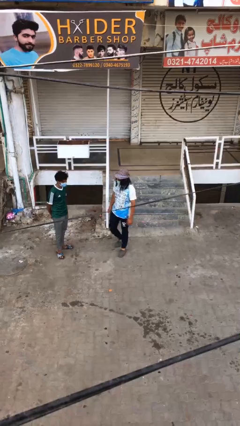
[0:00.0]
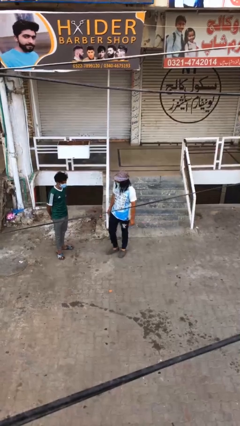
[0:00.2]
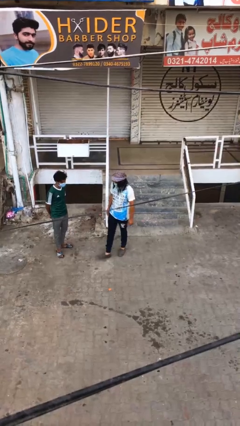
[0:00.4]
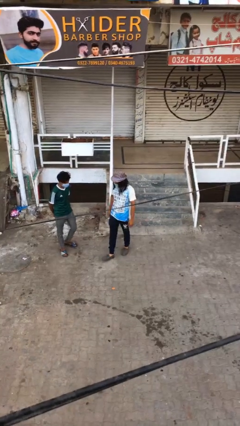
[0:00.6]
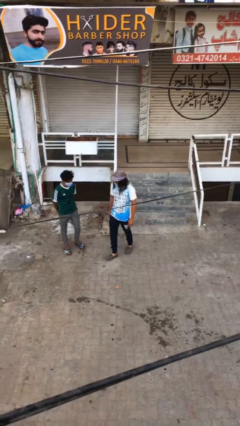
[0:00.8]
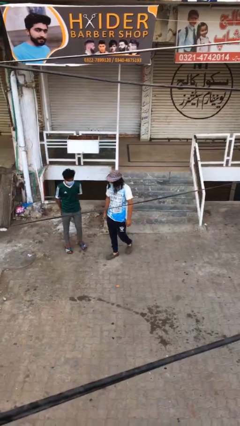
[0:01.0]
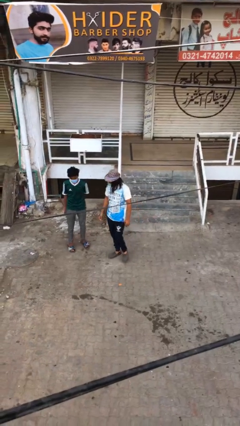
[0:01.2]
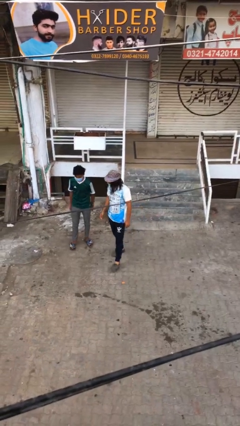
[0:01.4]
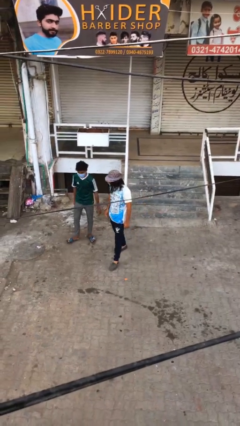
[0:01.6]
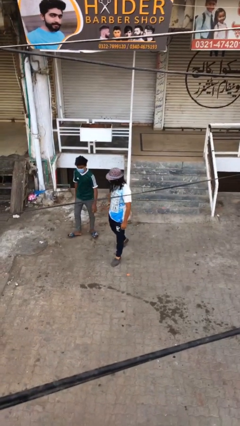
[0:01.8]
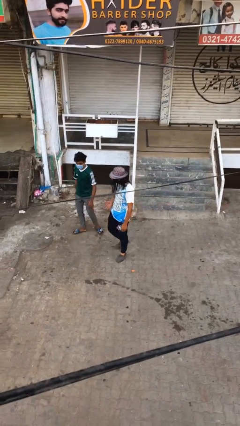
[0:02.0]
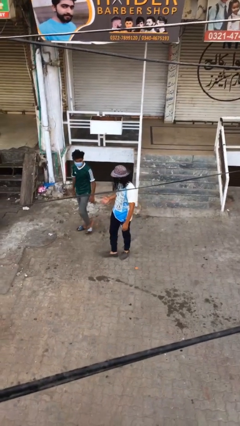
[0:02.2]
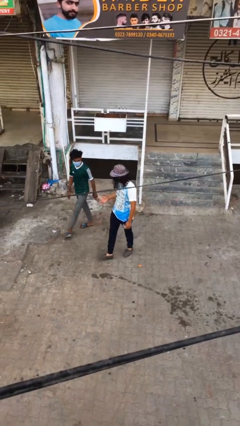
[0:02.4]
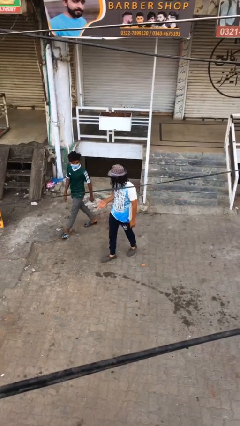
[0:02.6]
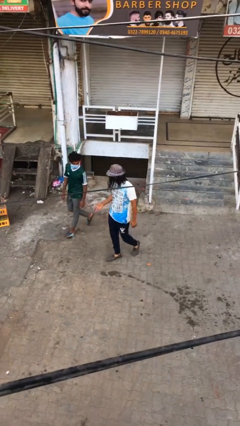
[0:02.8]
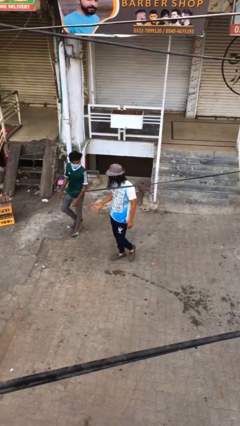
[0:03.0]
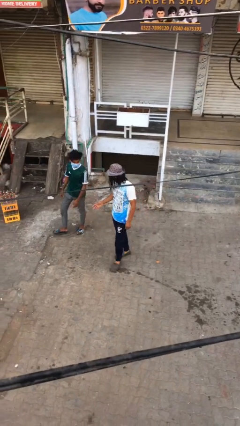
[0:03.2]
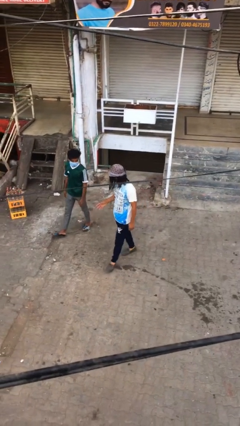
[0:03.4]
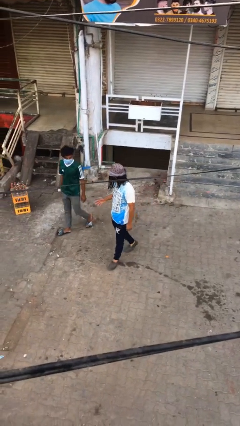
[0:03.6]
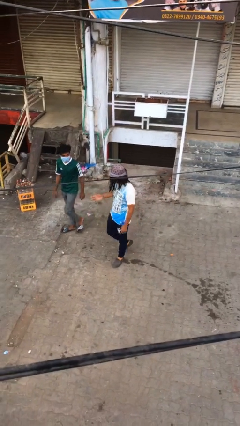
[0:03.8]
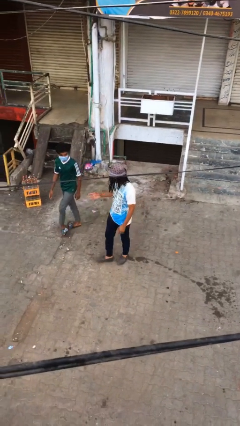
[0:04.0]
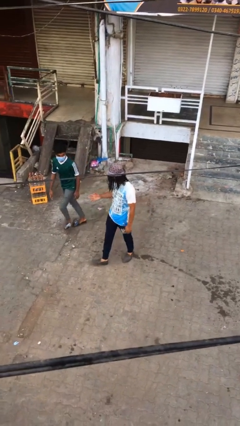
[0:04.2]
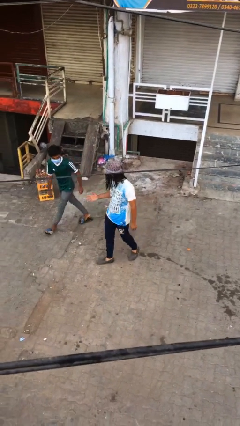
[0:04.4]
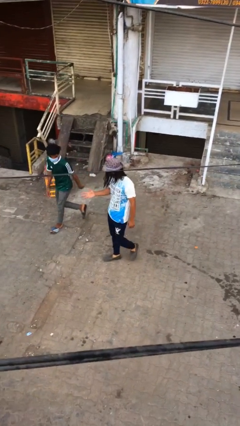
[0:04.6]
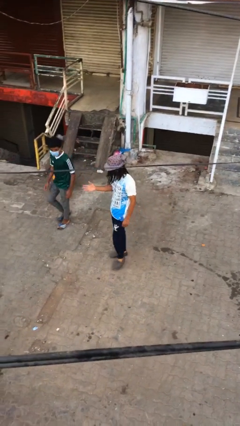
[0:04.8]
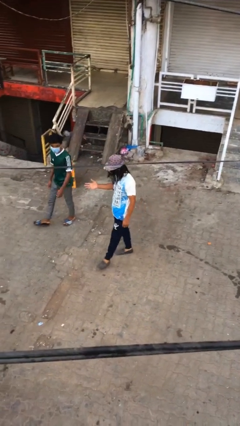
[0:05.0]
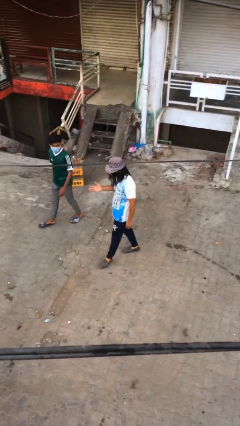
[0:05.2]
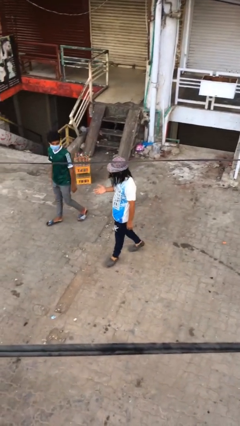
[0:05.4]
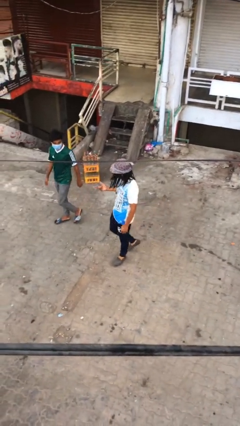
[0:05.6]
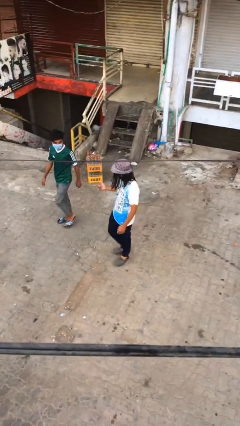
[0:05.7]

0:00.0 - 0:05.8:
person talks to person

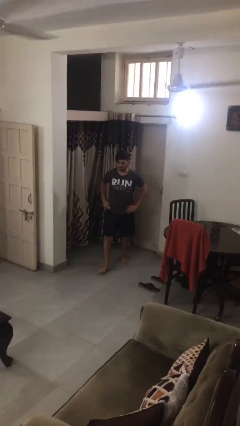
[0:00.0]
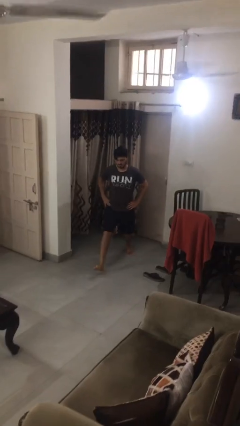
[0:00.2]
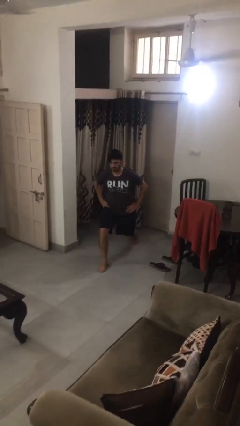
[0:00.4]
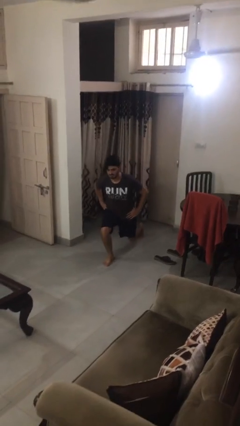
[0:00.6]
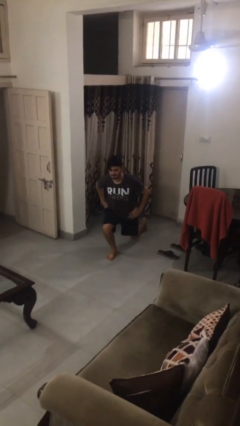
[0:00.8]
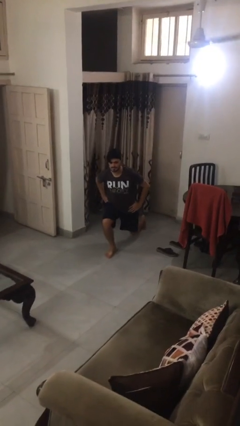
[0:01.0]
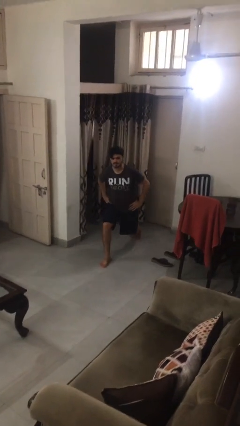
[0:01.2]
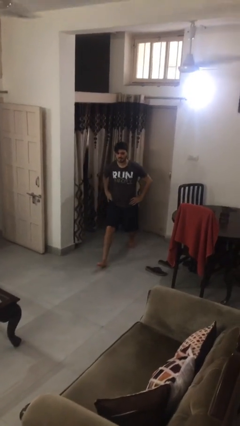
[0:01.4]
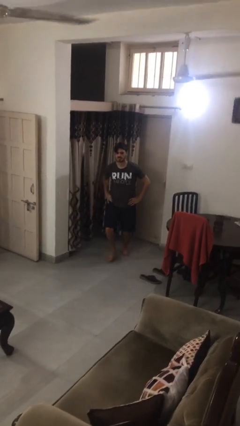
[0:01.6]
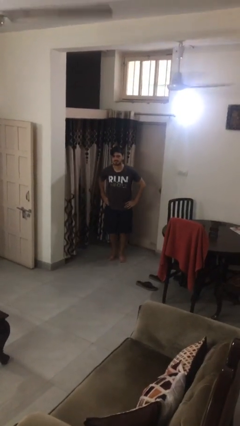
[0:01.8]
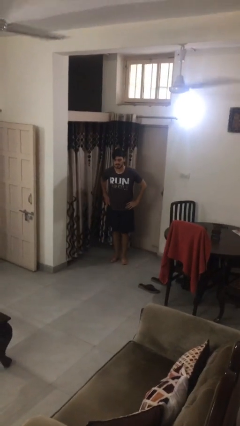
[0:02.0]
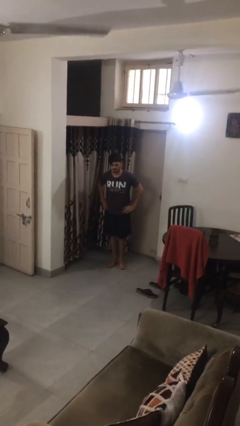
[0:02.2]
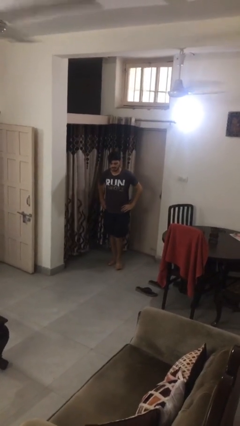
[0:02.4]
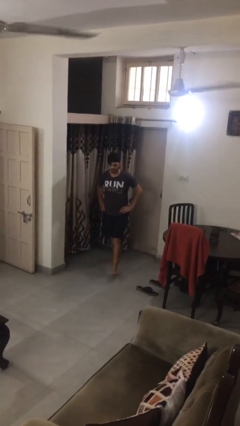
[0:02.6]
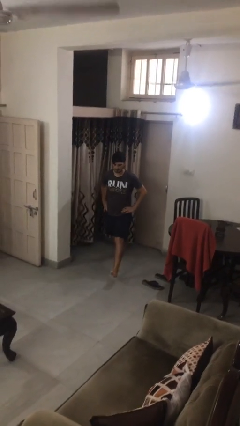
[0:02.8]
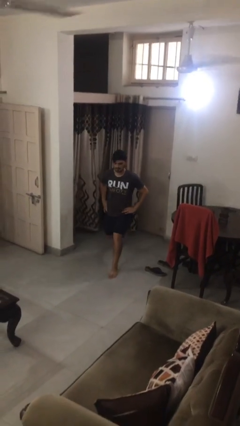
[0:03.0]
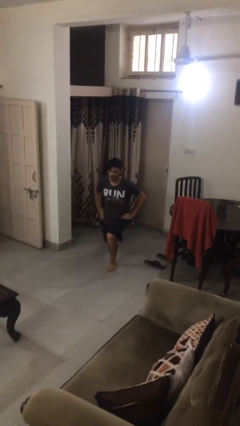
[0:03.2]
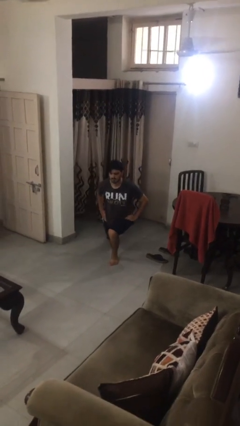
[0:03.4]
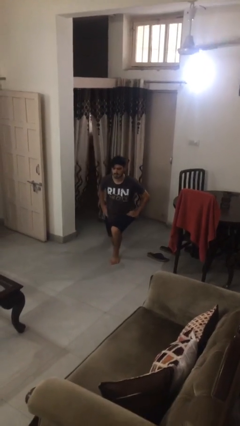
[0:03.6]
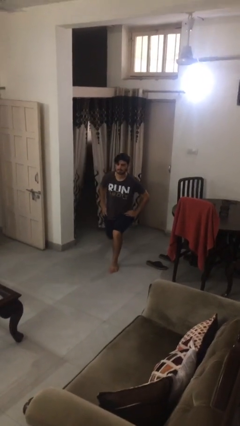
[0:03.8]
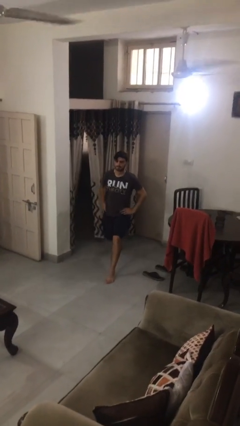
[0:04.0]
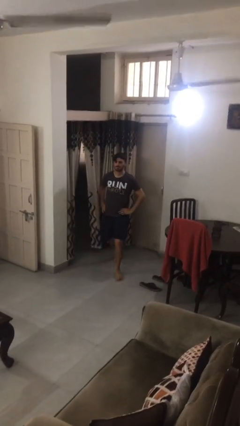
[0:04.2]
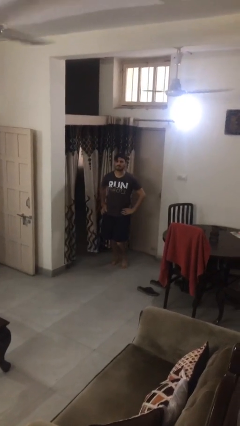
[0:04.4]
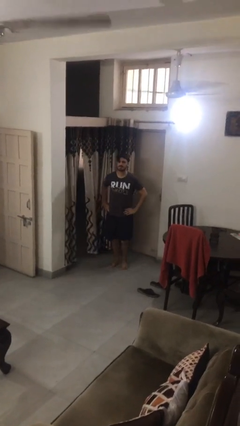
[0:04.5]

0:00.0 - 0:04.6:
person exercises with lunges

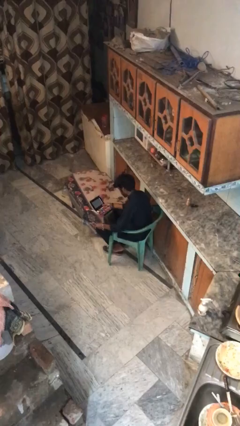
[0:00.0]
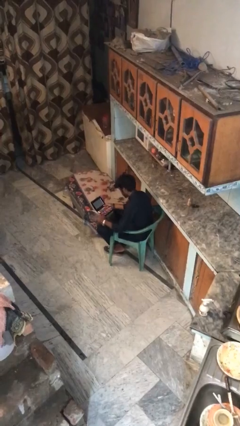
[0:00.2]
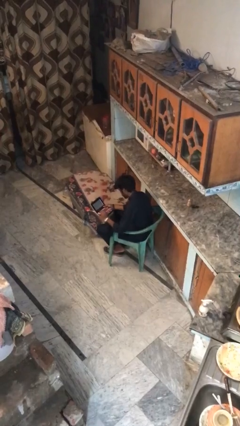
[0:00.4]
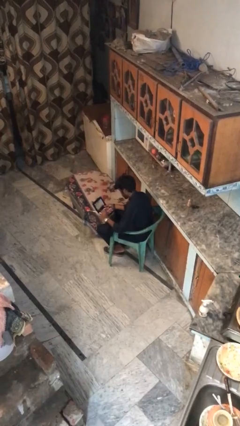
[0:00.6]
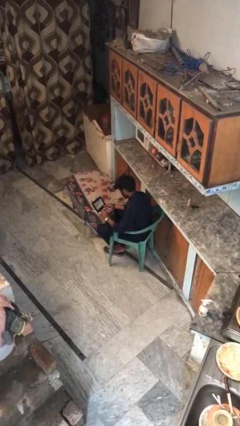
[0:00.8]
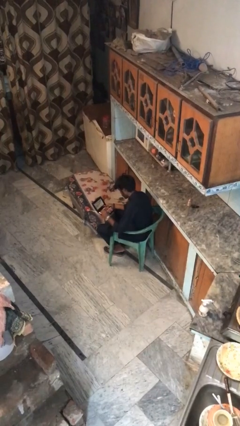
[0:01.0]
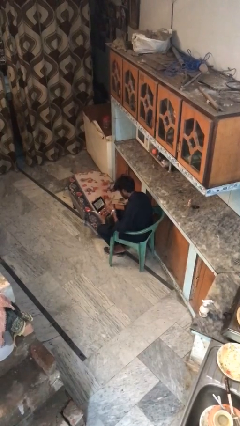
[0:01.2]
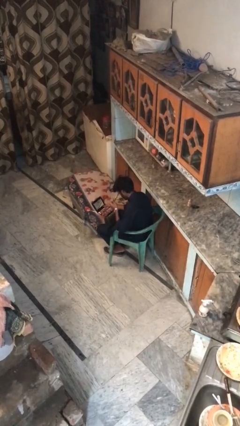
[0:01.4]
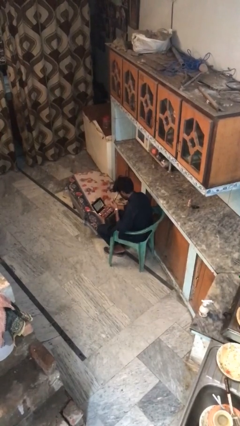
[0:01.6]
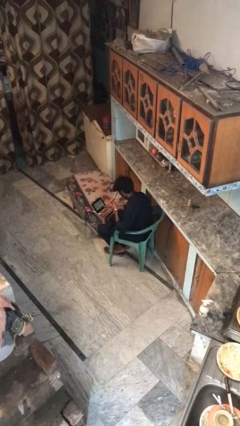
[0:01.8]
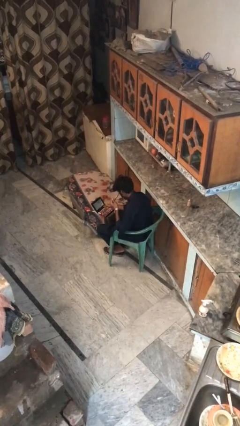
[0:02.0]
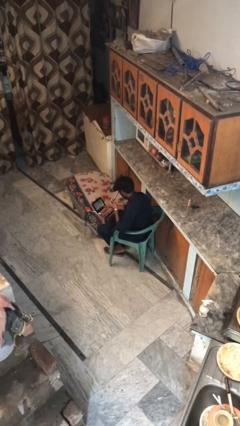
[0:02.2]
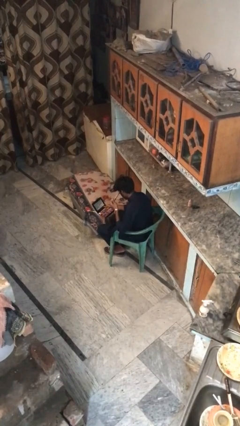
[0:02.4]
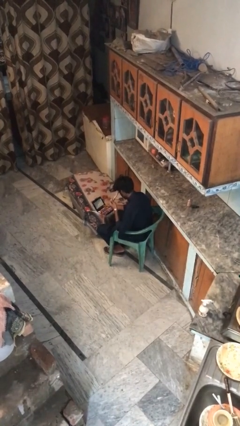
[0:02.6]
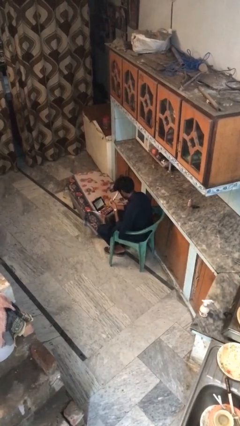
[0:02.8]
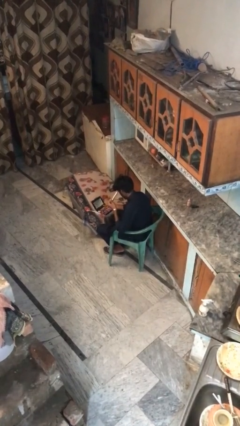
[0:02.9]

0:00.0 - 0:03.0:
person applies eye makeup

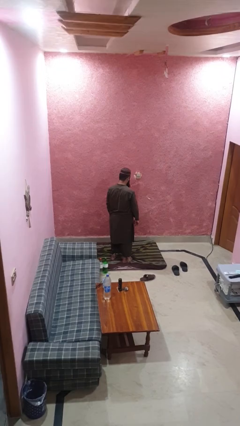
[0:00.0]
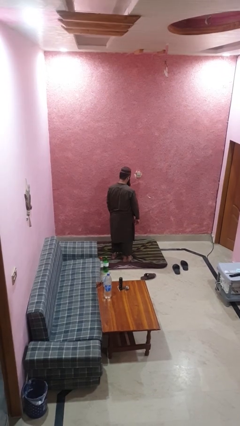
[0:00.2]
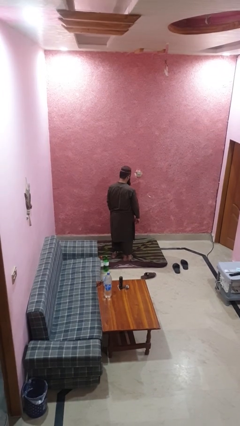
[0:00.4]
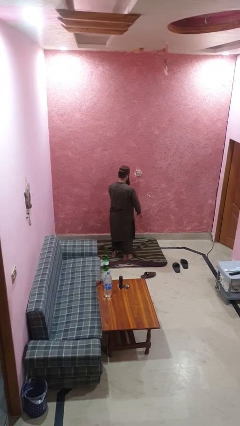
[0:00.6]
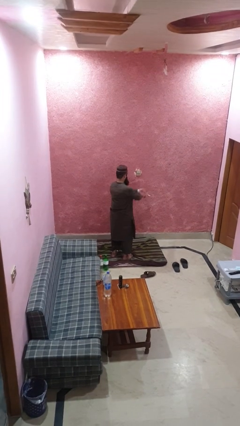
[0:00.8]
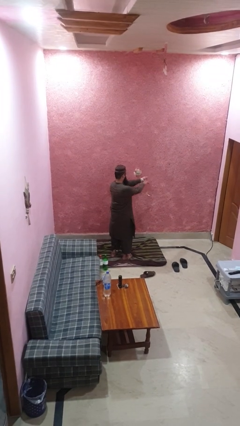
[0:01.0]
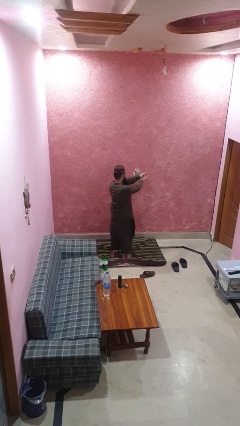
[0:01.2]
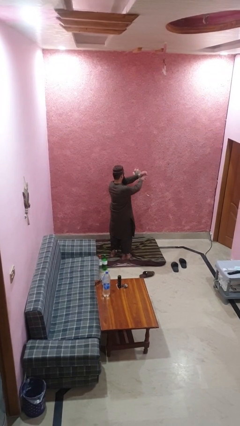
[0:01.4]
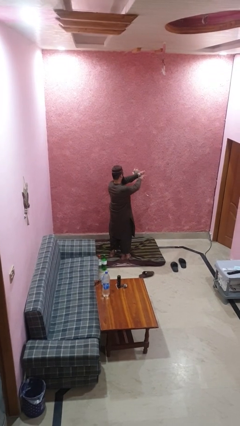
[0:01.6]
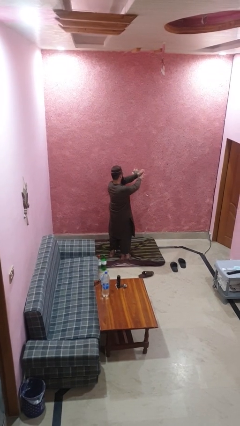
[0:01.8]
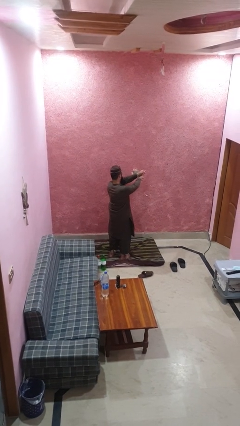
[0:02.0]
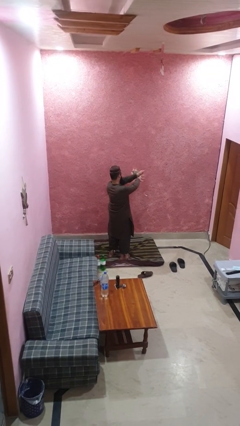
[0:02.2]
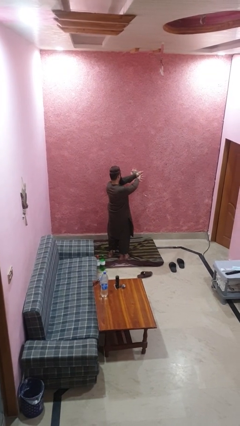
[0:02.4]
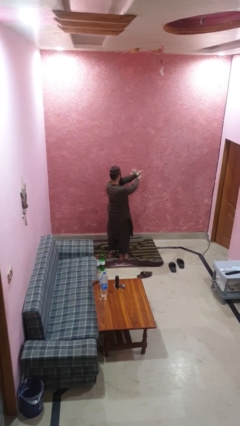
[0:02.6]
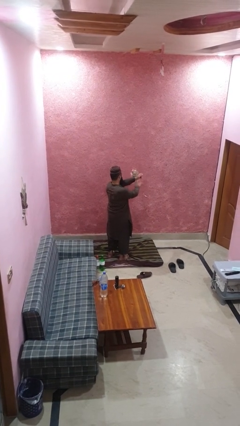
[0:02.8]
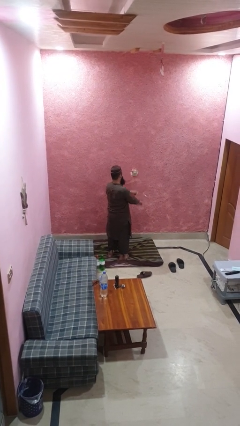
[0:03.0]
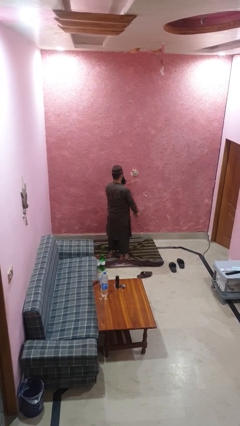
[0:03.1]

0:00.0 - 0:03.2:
person snaps fingers

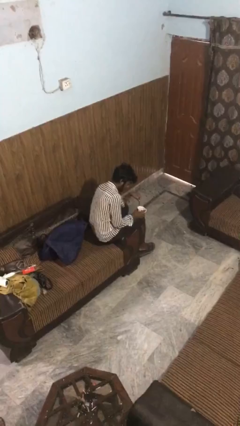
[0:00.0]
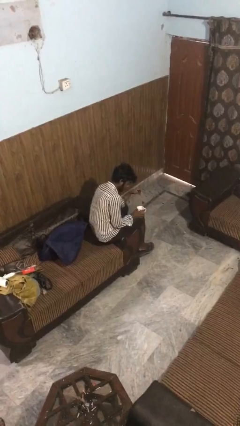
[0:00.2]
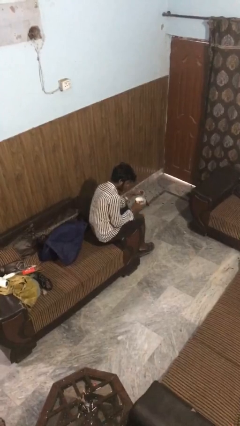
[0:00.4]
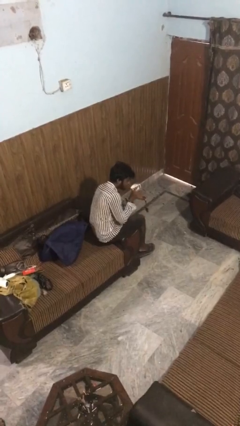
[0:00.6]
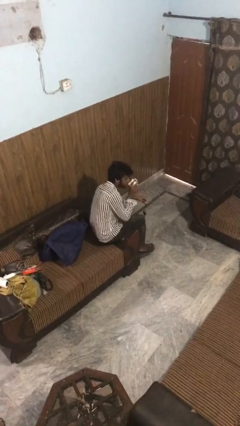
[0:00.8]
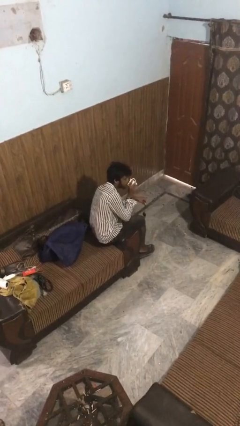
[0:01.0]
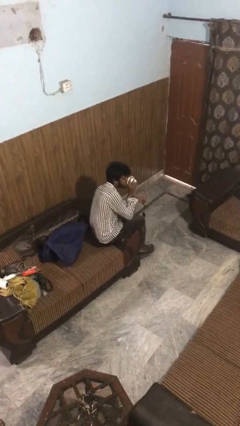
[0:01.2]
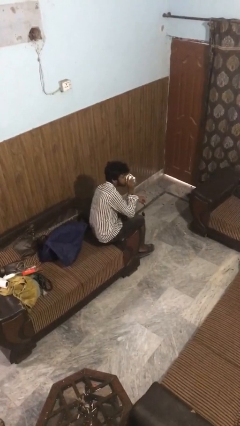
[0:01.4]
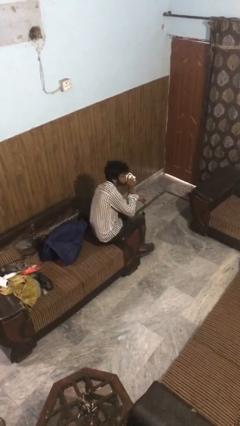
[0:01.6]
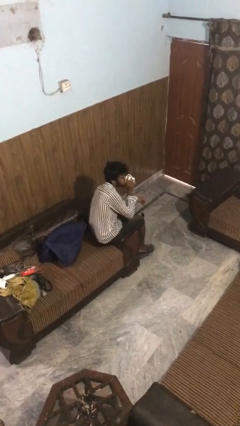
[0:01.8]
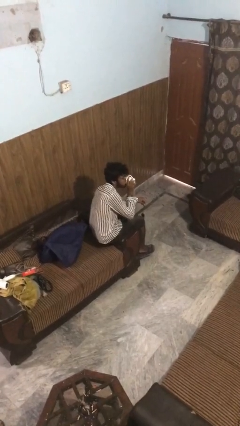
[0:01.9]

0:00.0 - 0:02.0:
person drinks from mug
